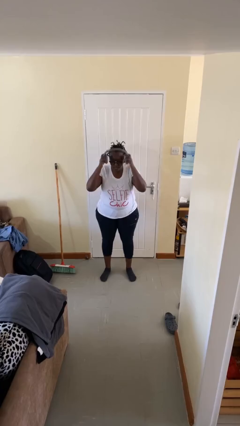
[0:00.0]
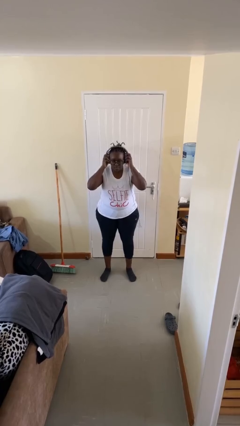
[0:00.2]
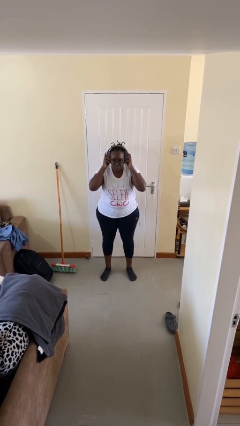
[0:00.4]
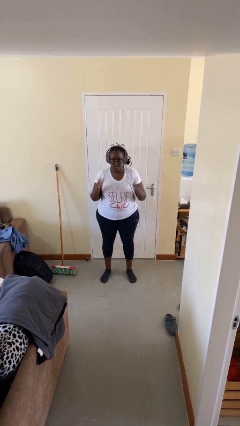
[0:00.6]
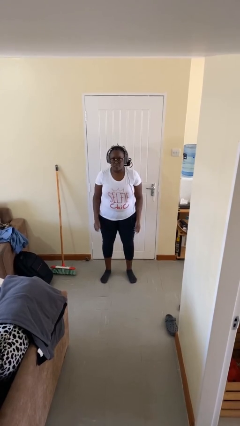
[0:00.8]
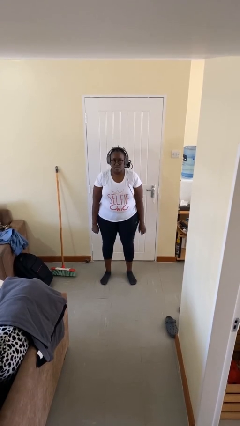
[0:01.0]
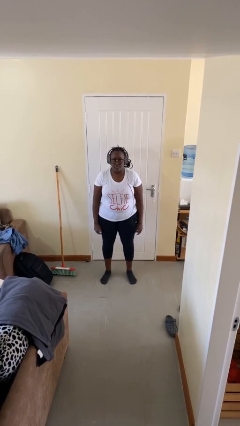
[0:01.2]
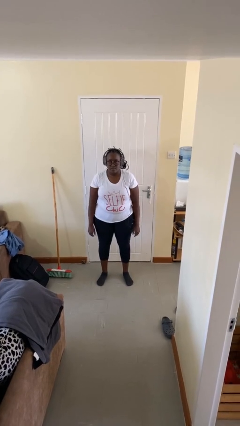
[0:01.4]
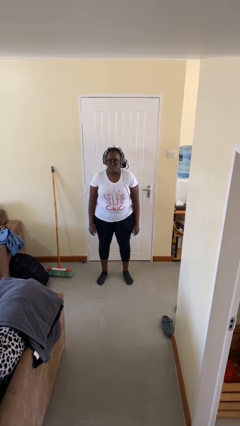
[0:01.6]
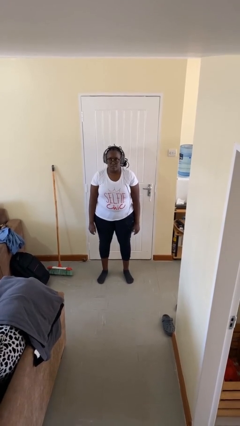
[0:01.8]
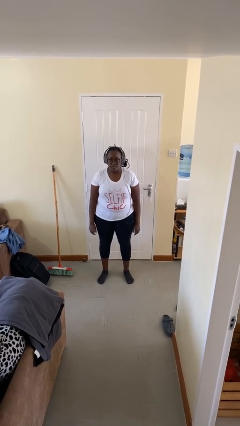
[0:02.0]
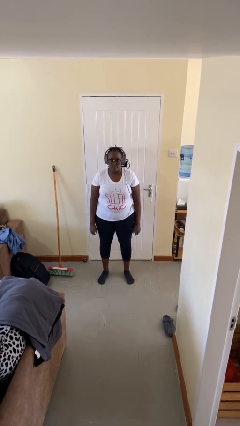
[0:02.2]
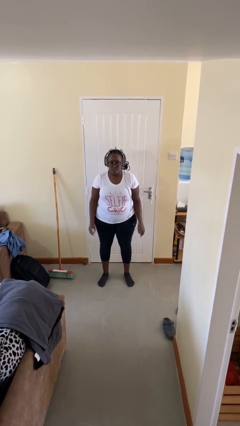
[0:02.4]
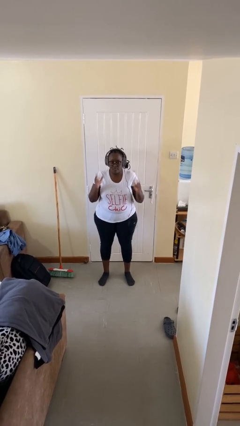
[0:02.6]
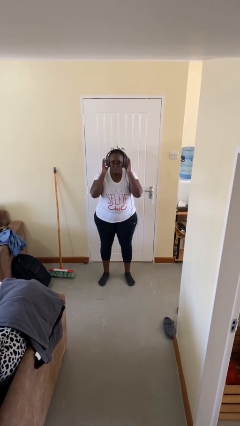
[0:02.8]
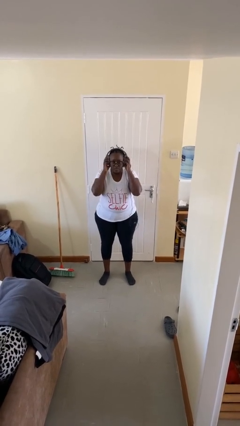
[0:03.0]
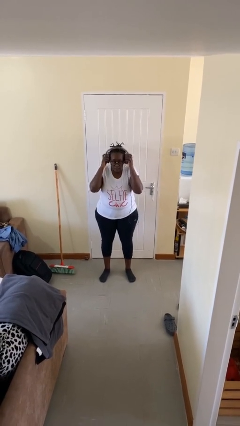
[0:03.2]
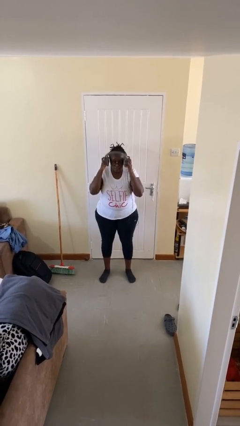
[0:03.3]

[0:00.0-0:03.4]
person puts on headphones

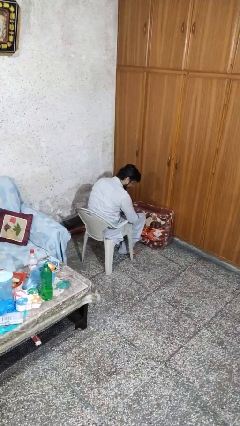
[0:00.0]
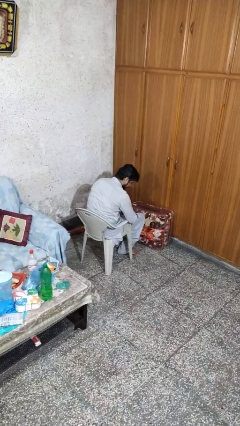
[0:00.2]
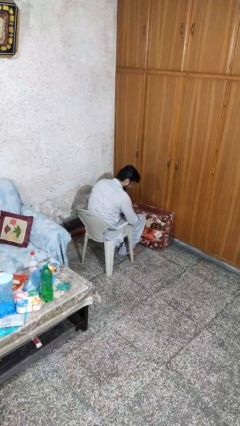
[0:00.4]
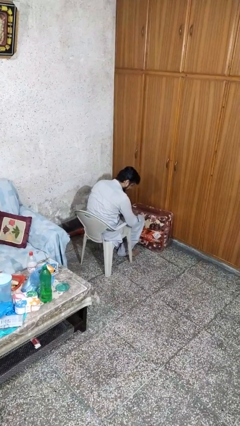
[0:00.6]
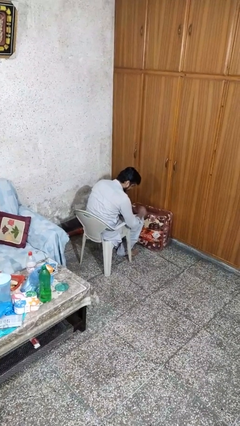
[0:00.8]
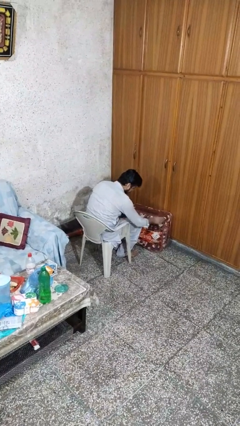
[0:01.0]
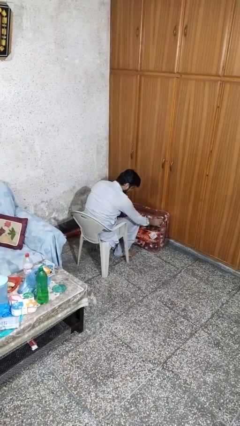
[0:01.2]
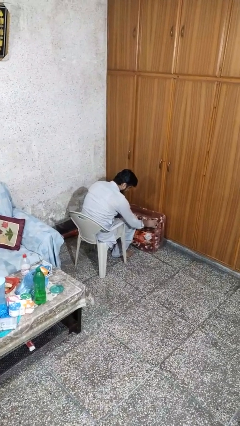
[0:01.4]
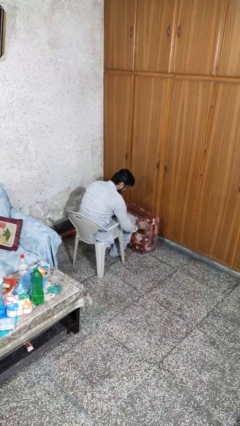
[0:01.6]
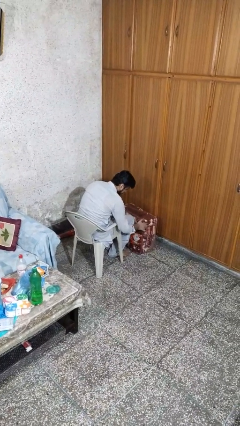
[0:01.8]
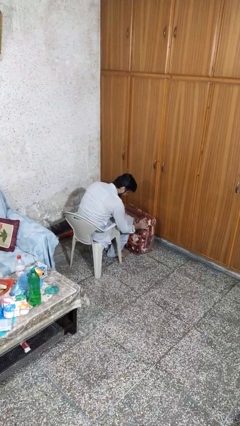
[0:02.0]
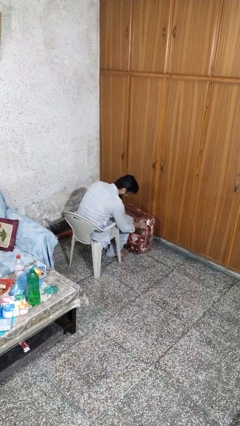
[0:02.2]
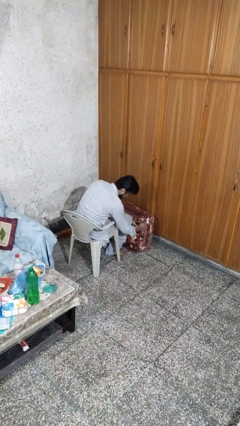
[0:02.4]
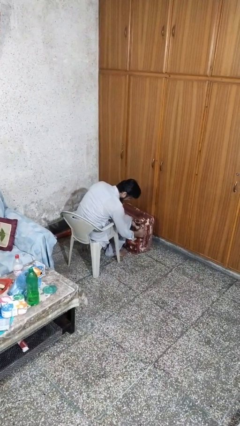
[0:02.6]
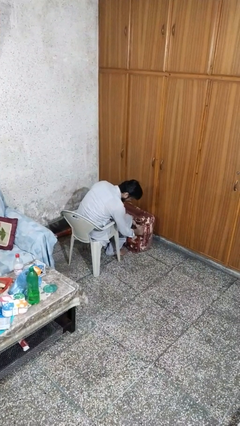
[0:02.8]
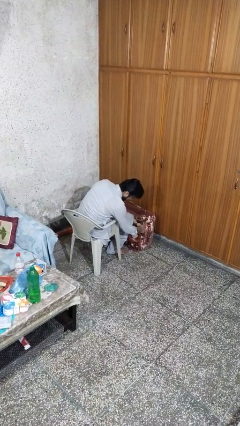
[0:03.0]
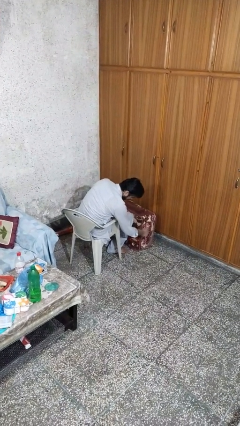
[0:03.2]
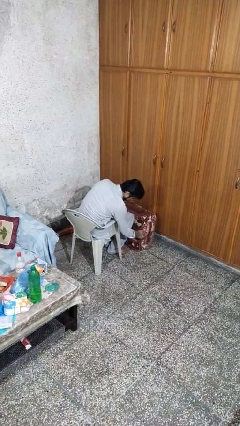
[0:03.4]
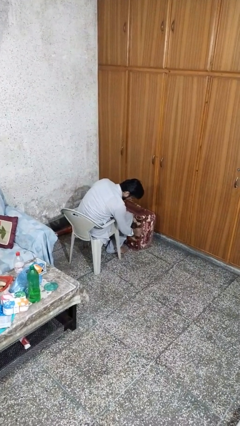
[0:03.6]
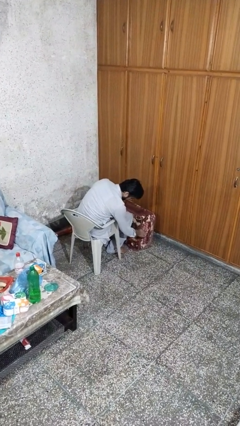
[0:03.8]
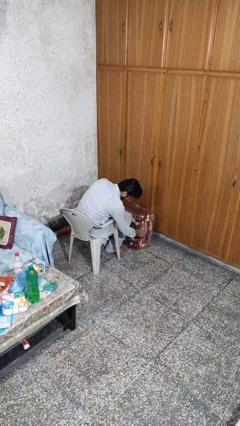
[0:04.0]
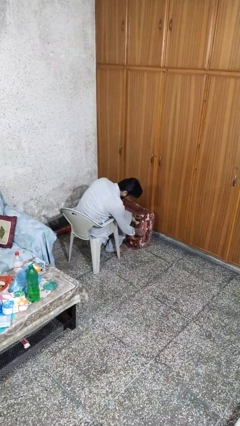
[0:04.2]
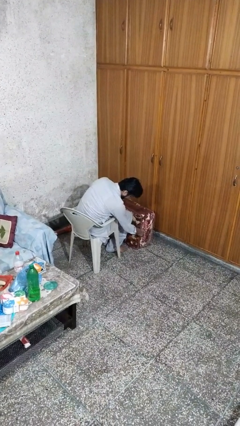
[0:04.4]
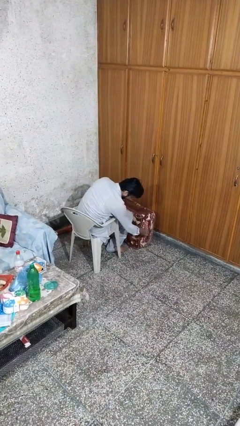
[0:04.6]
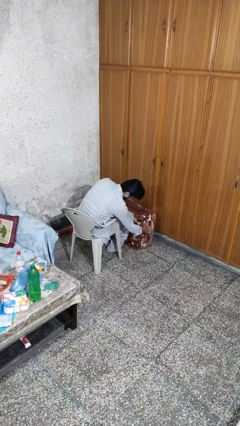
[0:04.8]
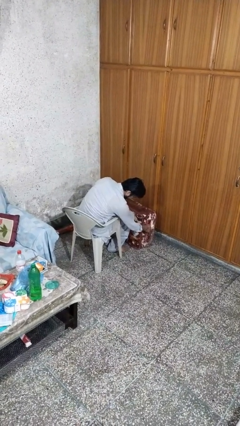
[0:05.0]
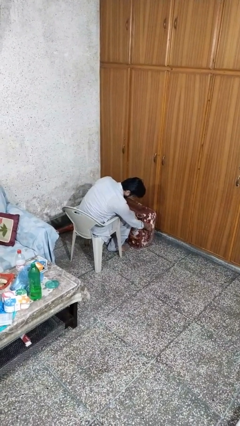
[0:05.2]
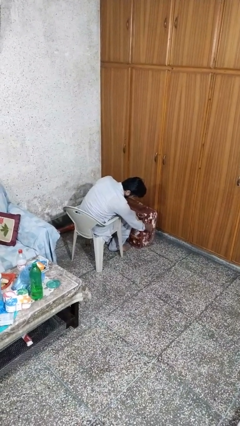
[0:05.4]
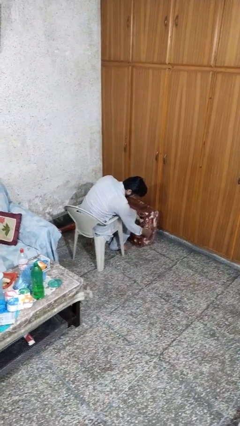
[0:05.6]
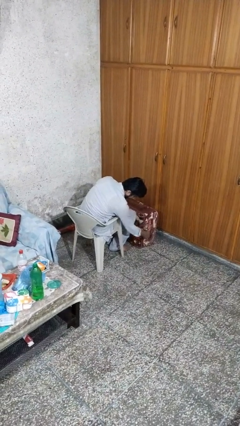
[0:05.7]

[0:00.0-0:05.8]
person taps object with finger

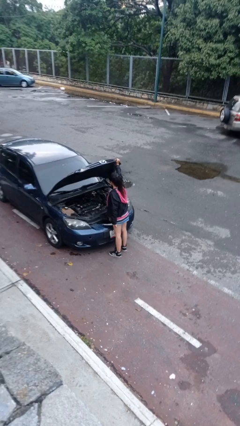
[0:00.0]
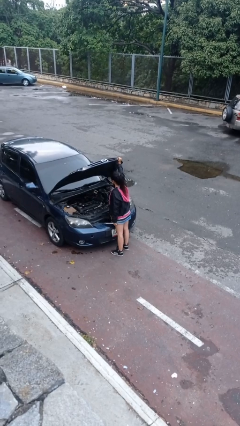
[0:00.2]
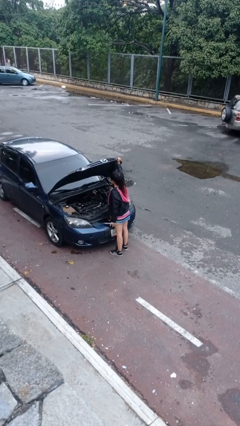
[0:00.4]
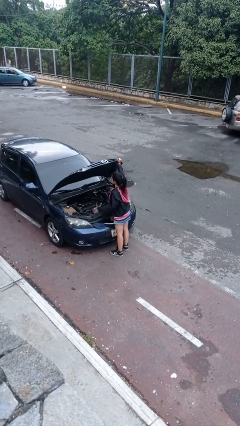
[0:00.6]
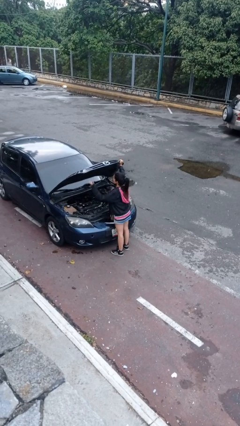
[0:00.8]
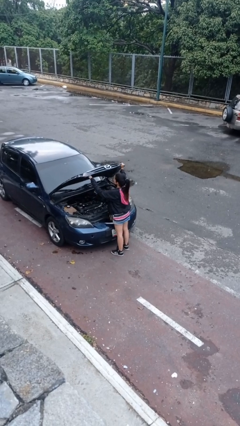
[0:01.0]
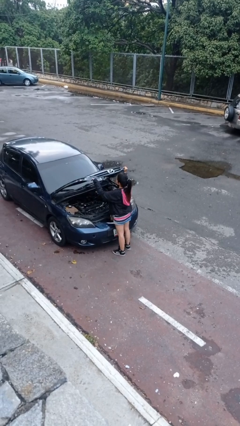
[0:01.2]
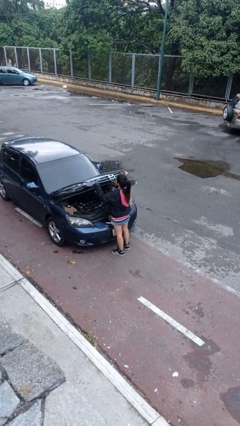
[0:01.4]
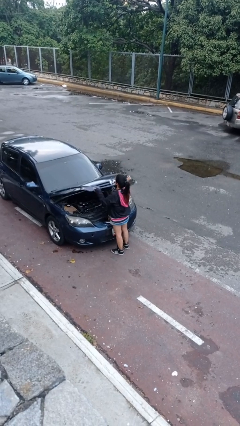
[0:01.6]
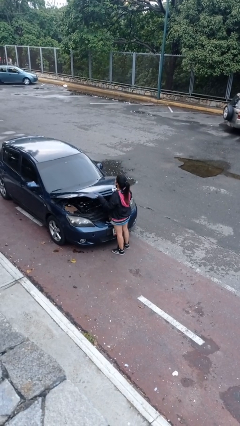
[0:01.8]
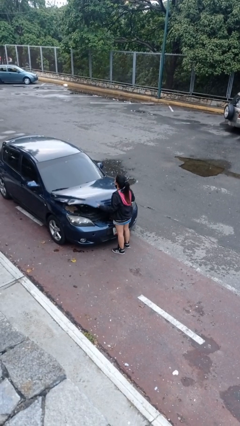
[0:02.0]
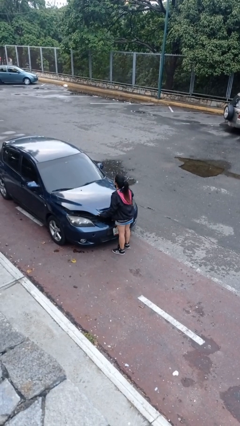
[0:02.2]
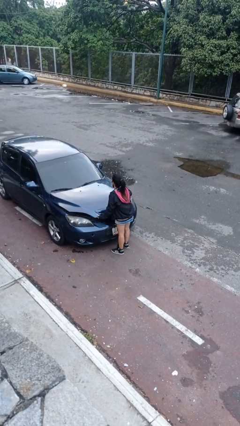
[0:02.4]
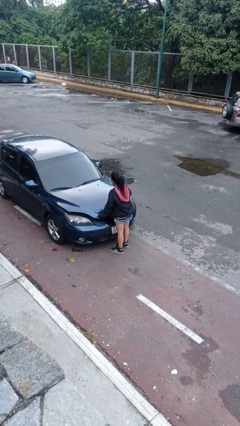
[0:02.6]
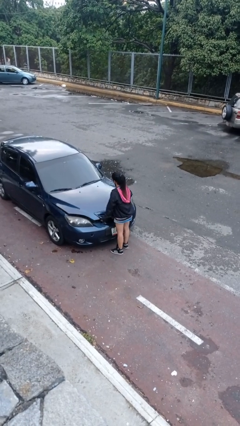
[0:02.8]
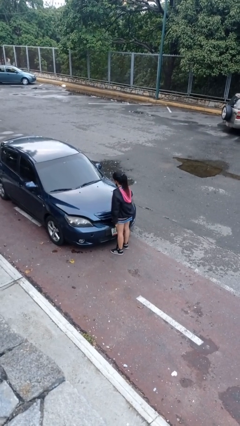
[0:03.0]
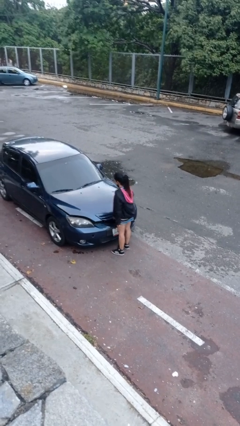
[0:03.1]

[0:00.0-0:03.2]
person closes car hood

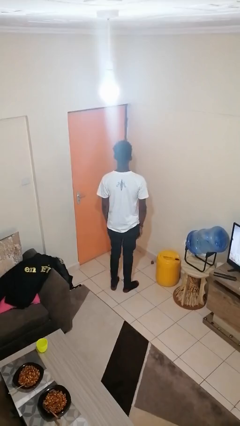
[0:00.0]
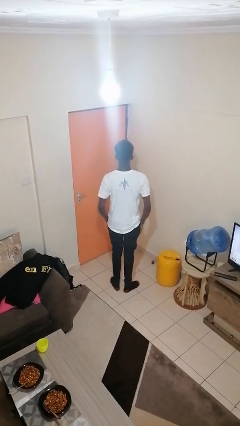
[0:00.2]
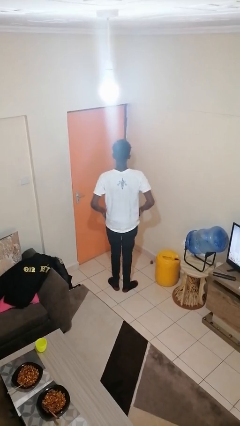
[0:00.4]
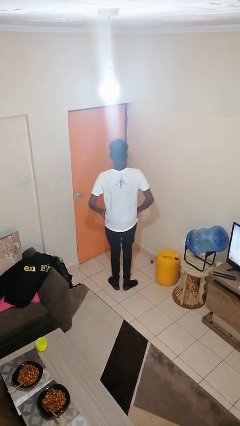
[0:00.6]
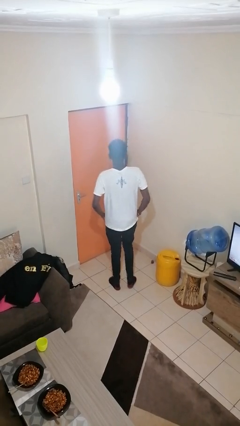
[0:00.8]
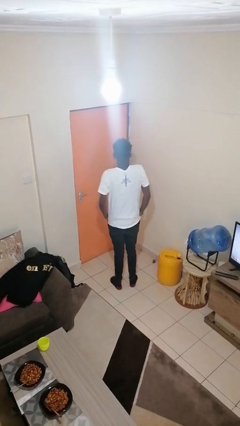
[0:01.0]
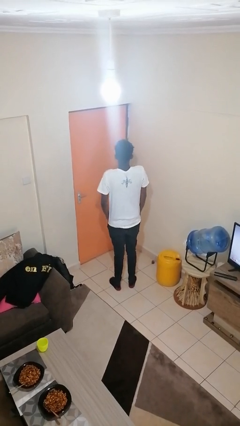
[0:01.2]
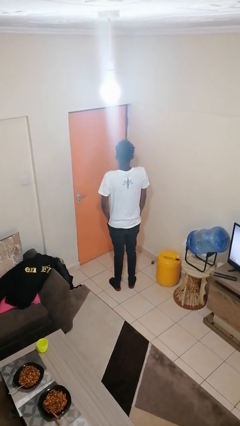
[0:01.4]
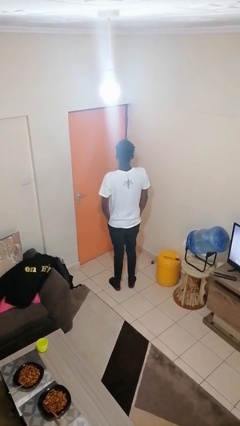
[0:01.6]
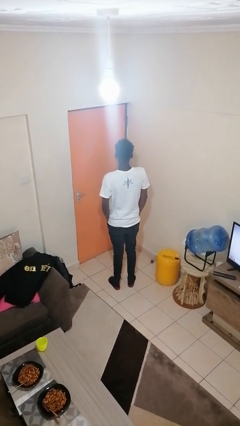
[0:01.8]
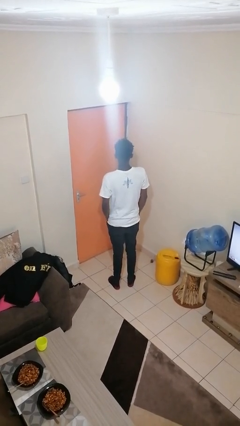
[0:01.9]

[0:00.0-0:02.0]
person puts hands in back pockets

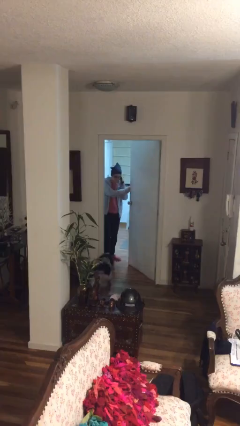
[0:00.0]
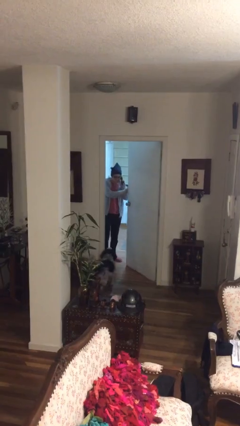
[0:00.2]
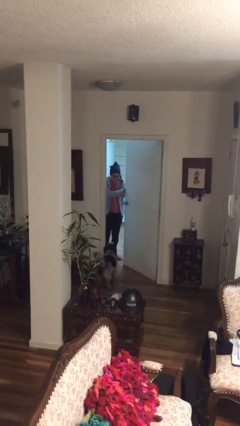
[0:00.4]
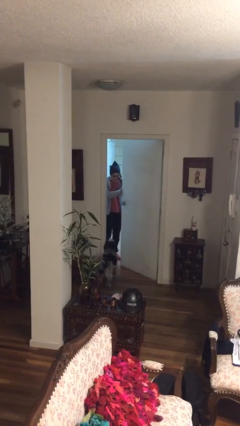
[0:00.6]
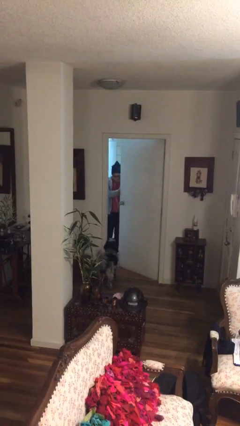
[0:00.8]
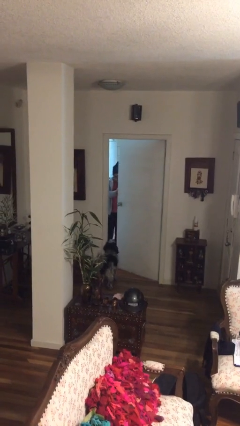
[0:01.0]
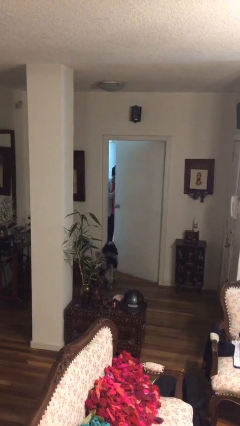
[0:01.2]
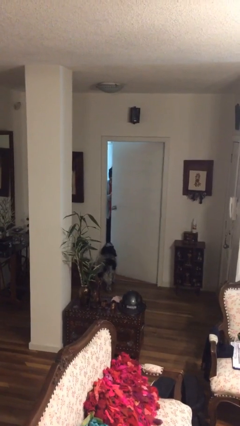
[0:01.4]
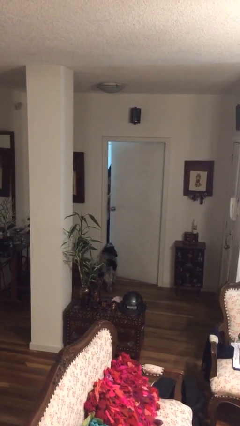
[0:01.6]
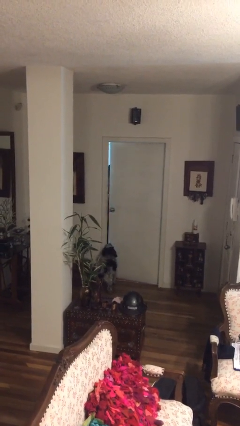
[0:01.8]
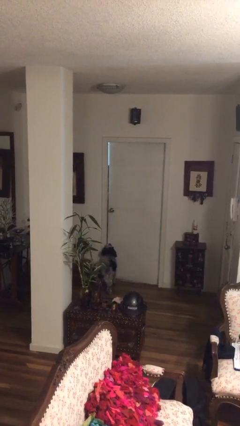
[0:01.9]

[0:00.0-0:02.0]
person closes facility door

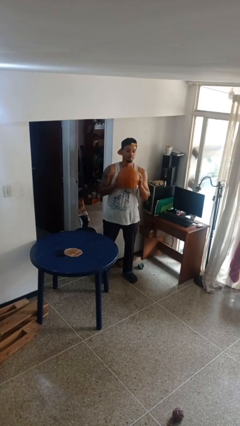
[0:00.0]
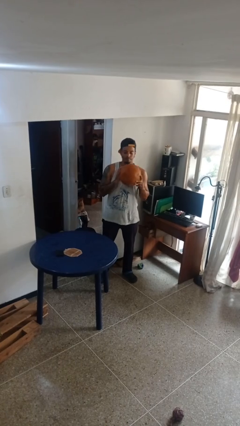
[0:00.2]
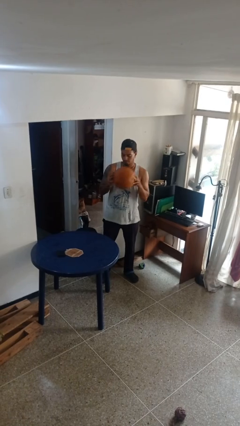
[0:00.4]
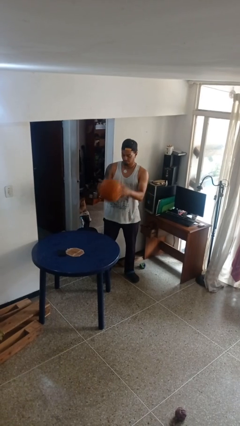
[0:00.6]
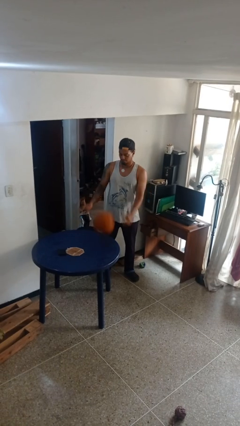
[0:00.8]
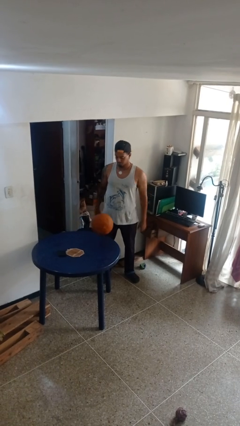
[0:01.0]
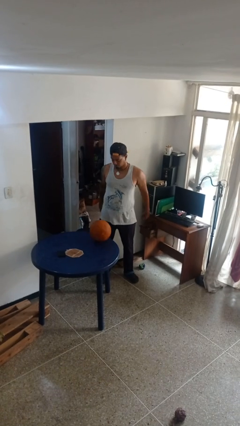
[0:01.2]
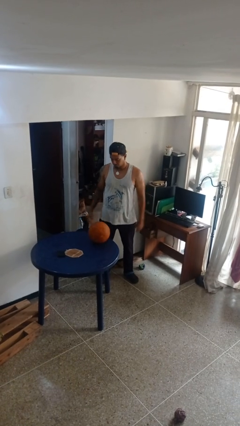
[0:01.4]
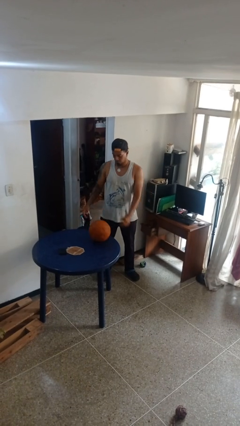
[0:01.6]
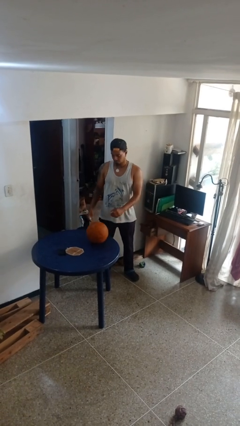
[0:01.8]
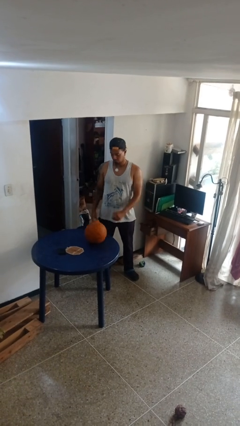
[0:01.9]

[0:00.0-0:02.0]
person throws object on table
